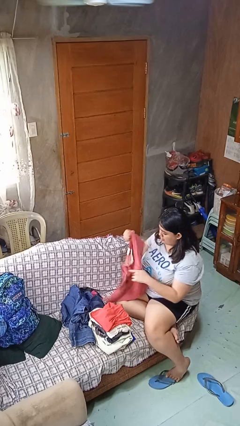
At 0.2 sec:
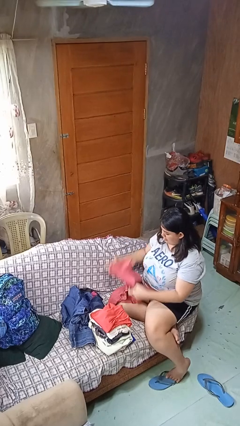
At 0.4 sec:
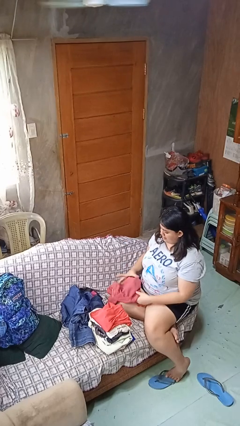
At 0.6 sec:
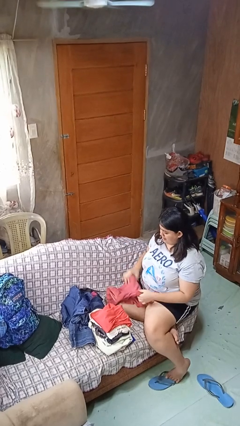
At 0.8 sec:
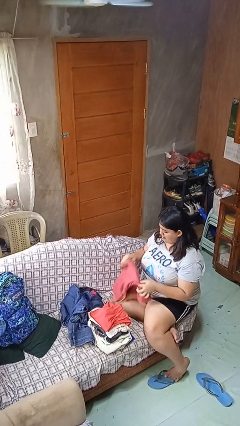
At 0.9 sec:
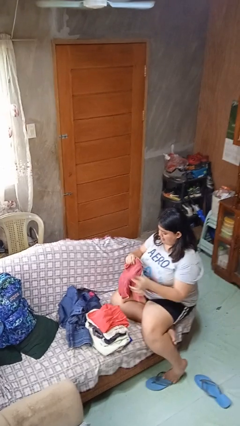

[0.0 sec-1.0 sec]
person folds shirt

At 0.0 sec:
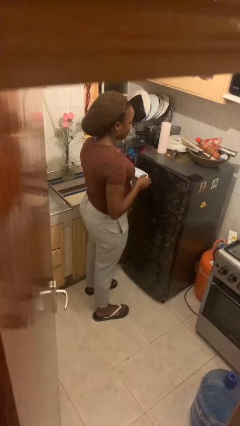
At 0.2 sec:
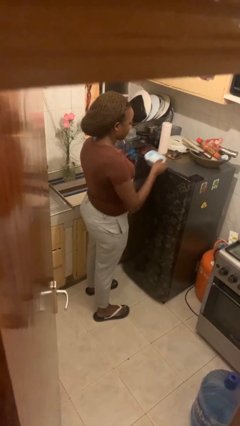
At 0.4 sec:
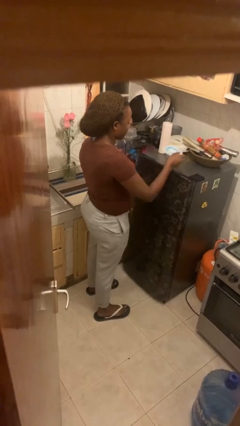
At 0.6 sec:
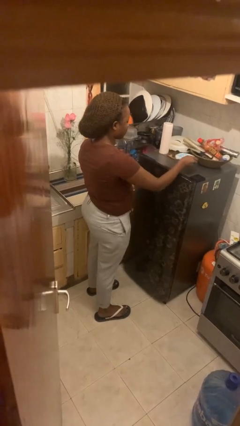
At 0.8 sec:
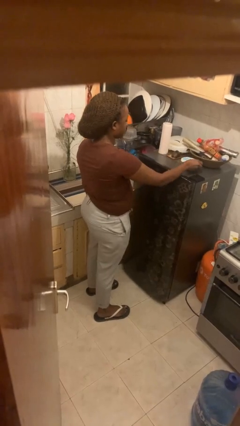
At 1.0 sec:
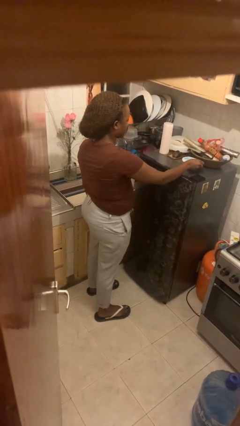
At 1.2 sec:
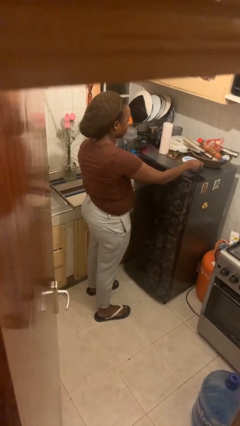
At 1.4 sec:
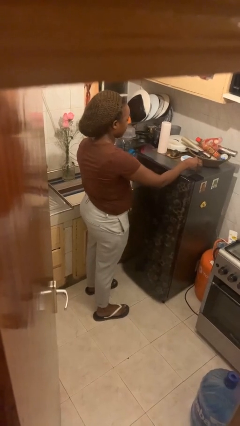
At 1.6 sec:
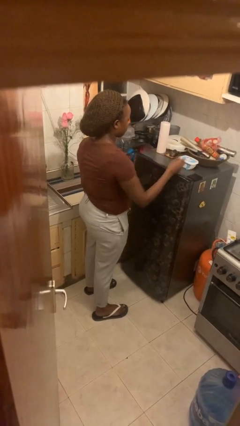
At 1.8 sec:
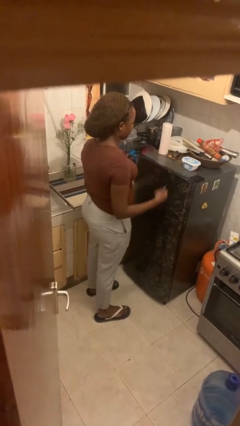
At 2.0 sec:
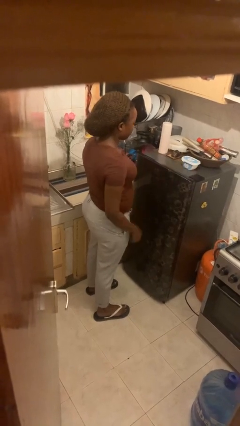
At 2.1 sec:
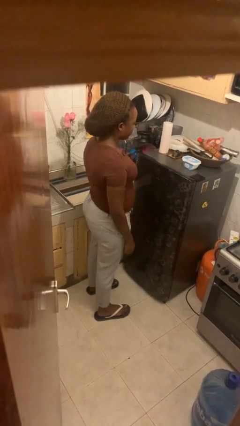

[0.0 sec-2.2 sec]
person puts down object on countertop

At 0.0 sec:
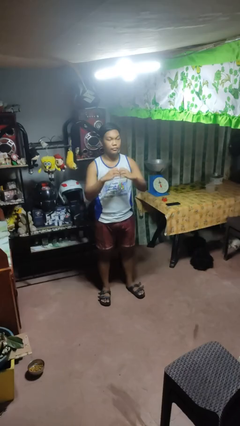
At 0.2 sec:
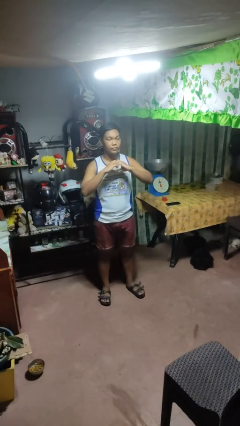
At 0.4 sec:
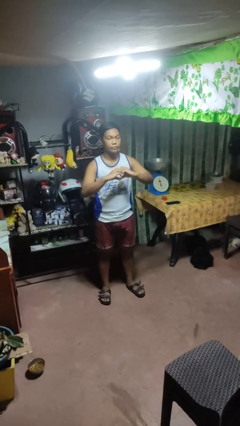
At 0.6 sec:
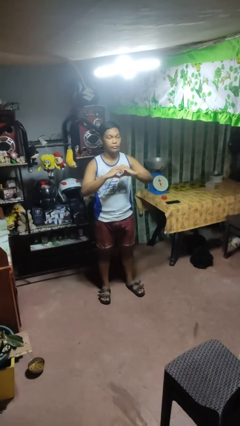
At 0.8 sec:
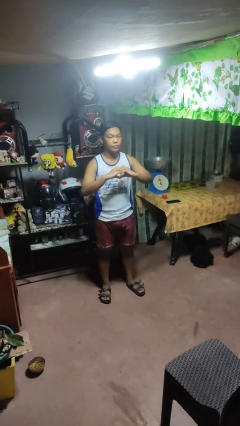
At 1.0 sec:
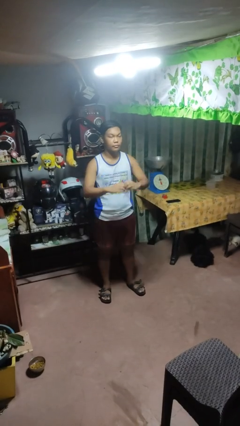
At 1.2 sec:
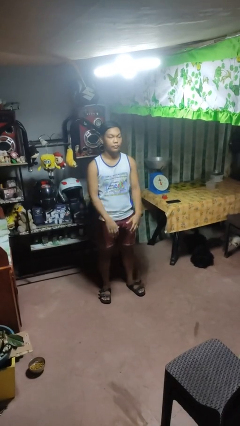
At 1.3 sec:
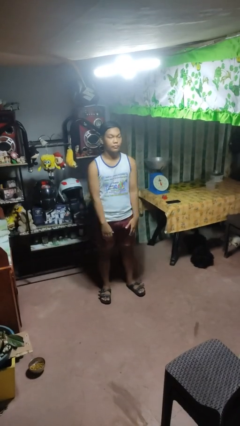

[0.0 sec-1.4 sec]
person gestures heart

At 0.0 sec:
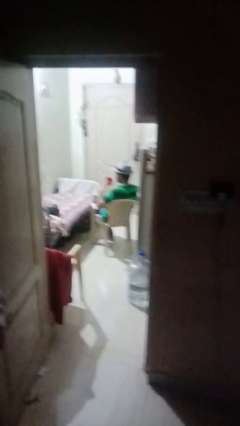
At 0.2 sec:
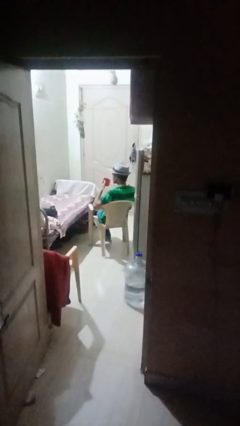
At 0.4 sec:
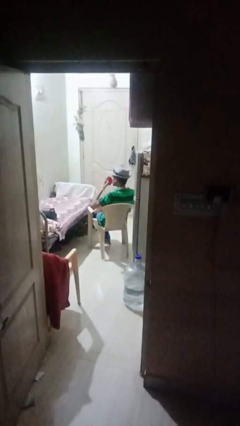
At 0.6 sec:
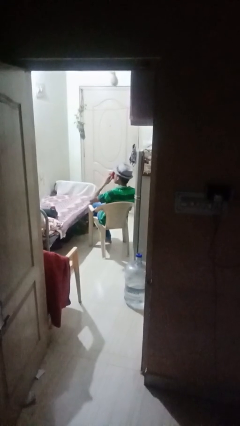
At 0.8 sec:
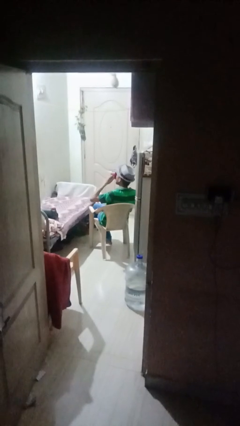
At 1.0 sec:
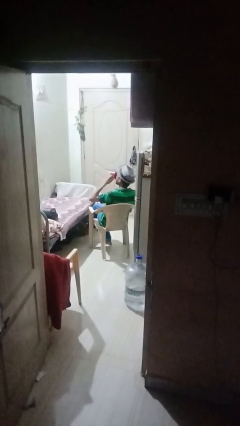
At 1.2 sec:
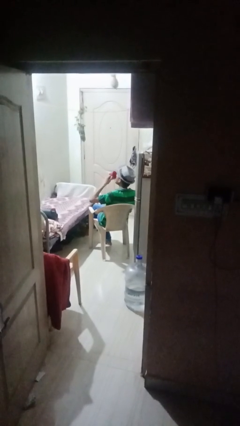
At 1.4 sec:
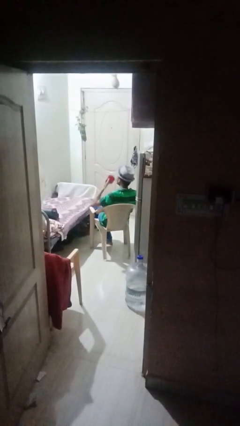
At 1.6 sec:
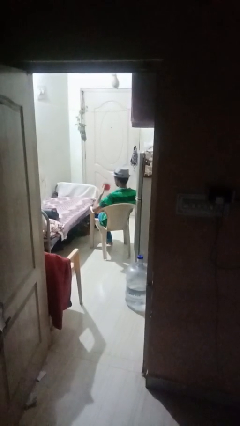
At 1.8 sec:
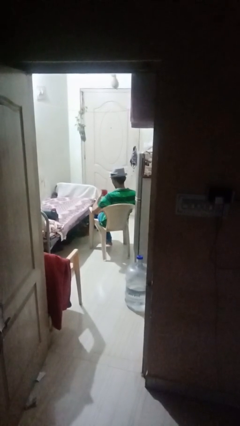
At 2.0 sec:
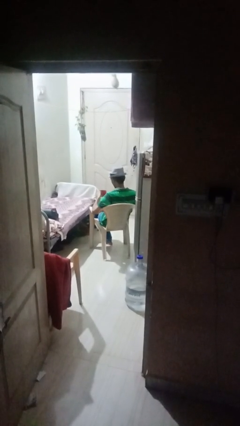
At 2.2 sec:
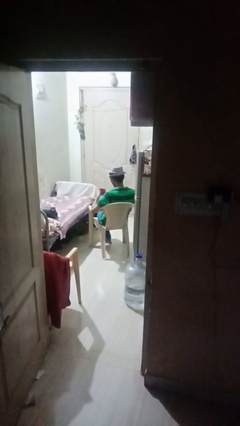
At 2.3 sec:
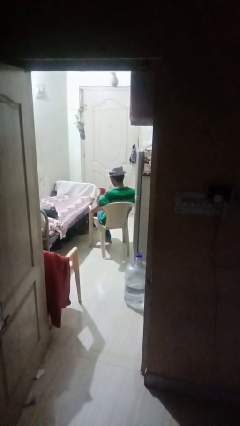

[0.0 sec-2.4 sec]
person drinks from mug

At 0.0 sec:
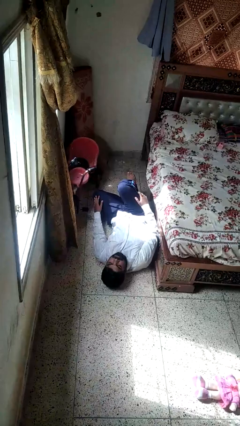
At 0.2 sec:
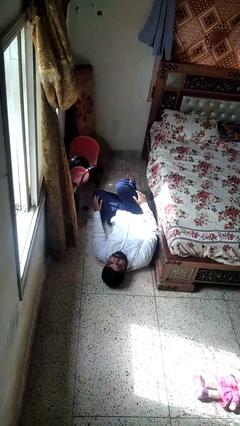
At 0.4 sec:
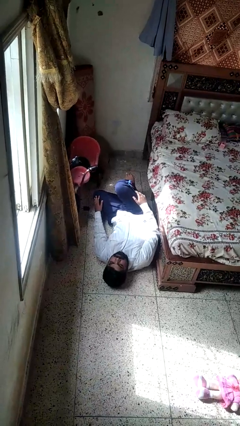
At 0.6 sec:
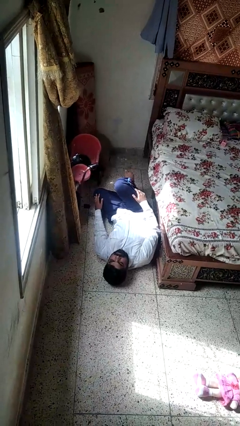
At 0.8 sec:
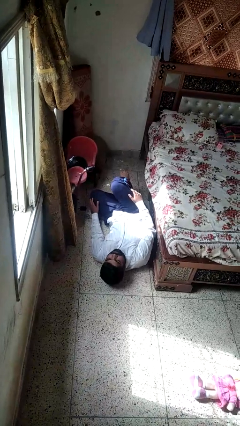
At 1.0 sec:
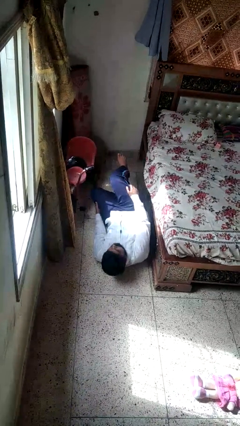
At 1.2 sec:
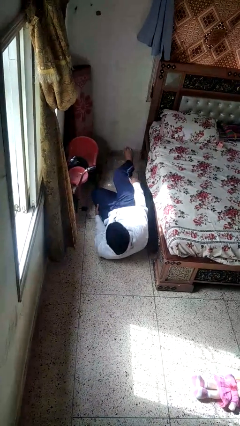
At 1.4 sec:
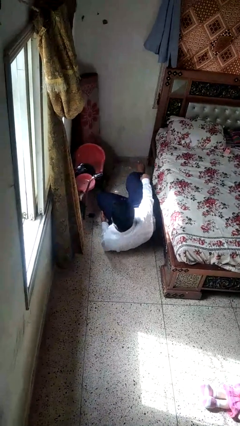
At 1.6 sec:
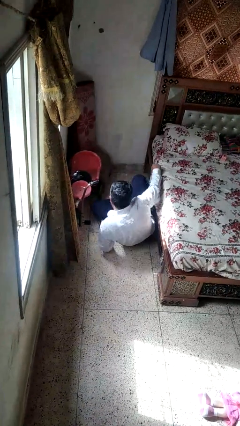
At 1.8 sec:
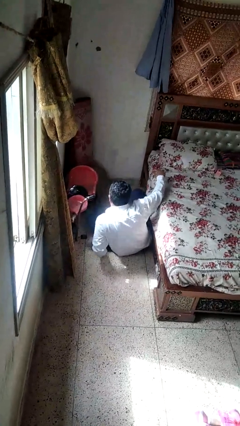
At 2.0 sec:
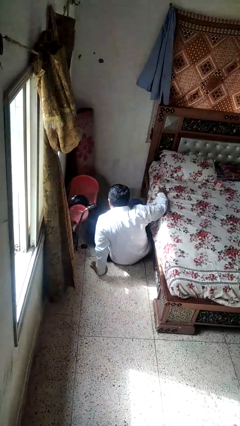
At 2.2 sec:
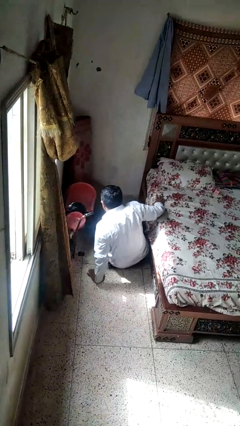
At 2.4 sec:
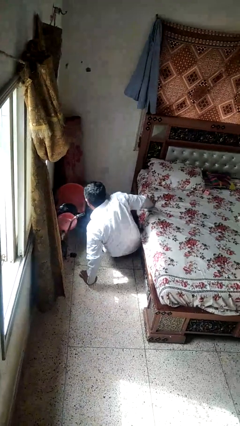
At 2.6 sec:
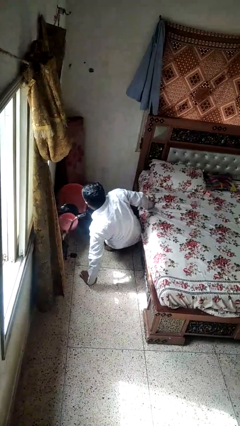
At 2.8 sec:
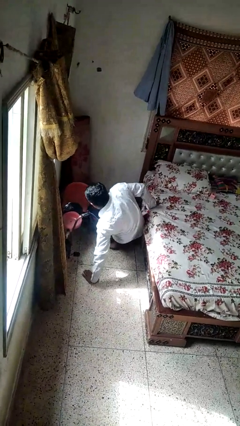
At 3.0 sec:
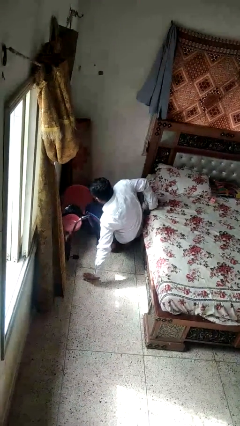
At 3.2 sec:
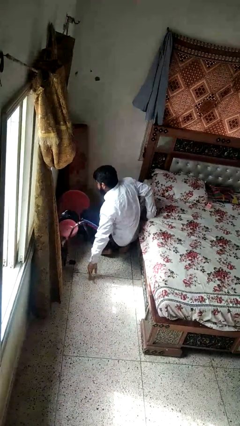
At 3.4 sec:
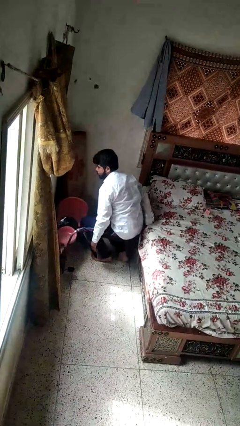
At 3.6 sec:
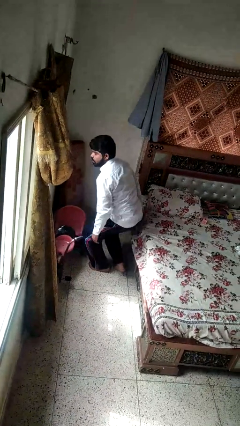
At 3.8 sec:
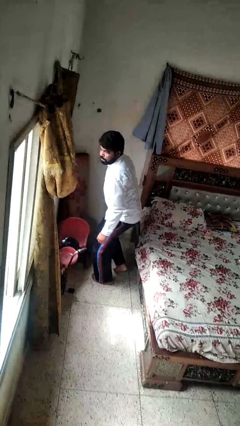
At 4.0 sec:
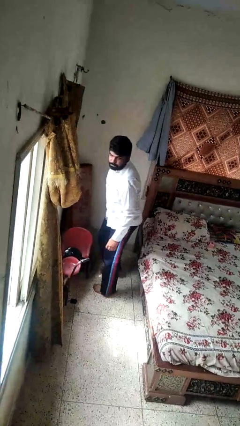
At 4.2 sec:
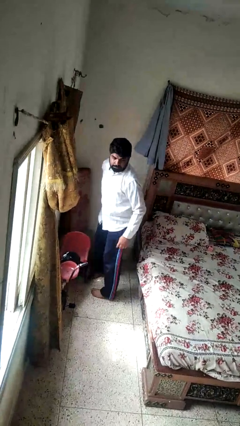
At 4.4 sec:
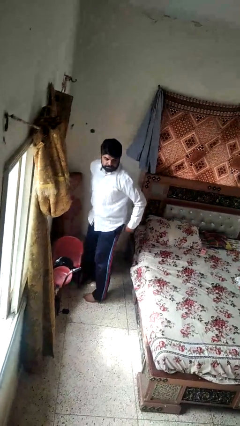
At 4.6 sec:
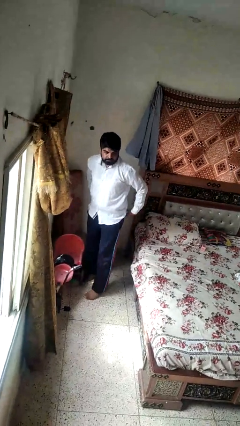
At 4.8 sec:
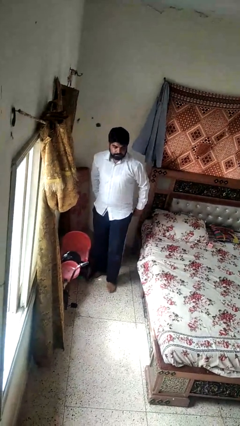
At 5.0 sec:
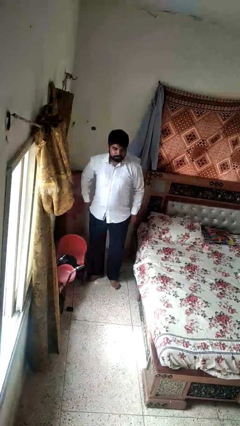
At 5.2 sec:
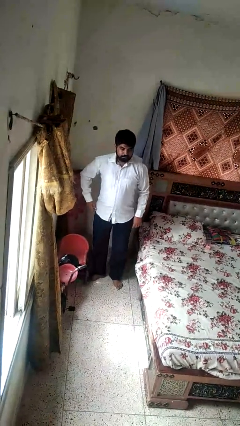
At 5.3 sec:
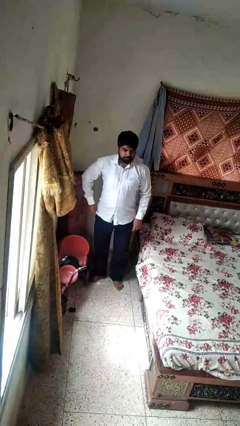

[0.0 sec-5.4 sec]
person stands up from floor

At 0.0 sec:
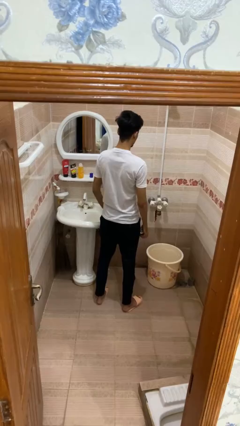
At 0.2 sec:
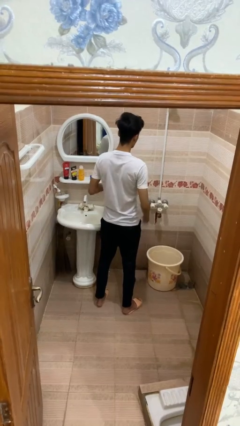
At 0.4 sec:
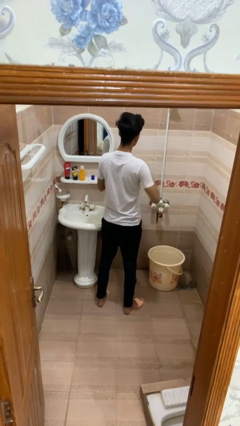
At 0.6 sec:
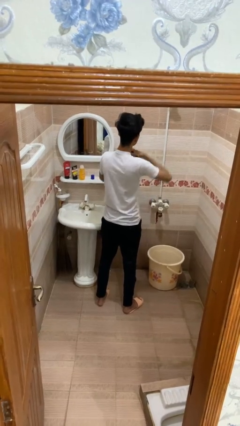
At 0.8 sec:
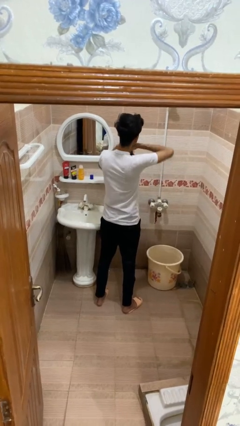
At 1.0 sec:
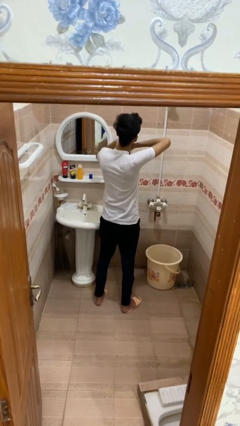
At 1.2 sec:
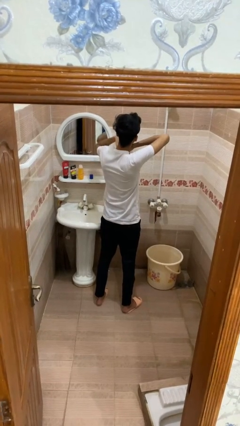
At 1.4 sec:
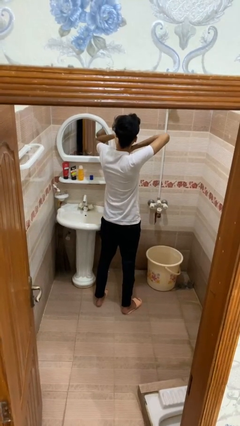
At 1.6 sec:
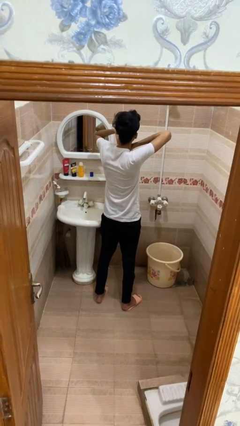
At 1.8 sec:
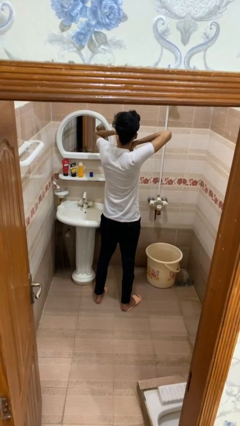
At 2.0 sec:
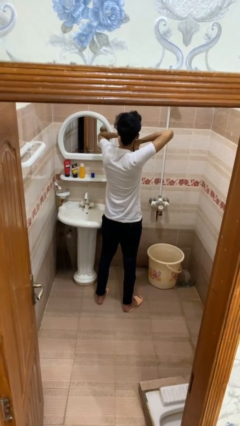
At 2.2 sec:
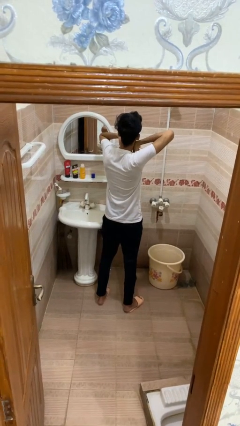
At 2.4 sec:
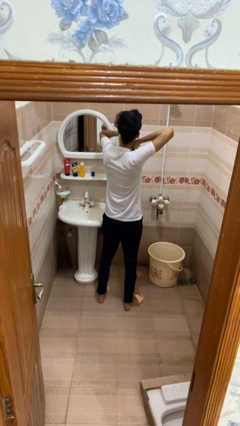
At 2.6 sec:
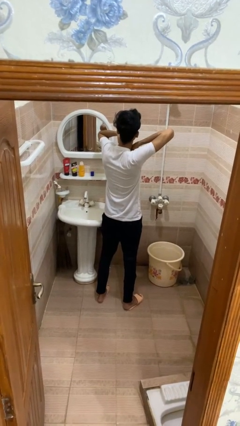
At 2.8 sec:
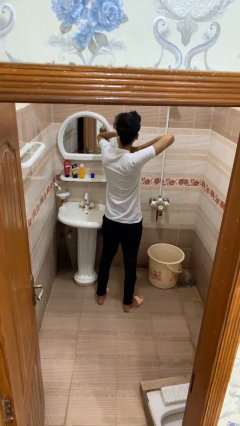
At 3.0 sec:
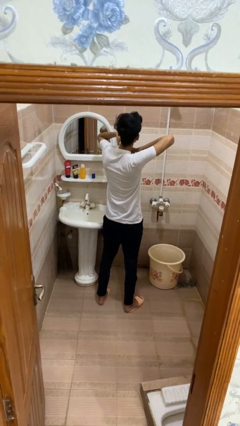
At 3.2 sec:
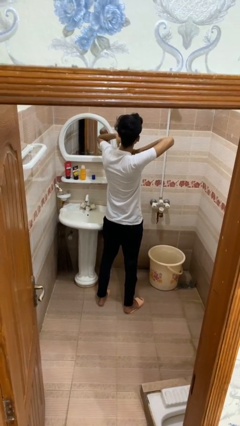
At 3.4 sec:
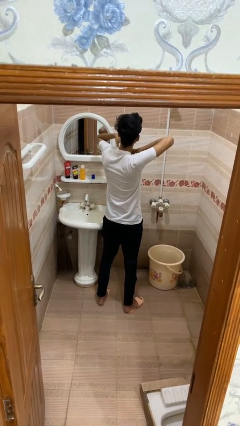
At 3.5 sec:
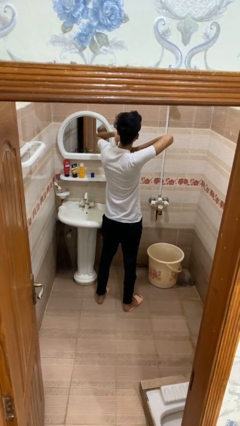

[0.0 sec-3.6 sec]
person applies deodorant

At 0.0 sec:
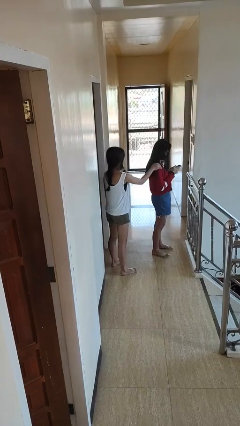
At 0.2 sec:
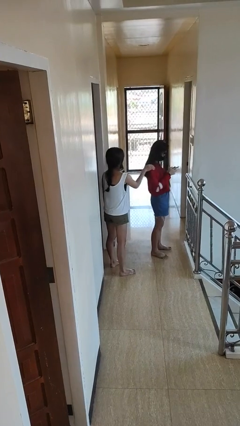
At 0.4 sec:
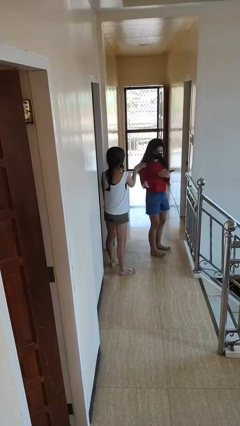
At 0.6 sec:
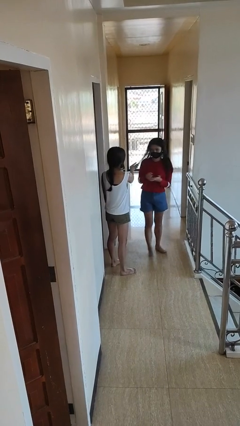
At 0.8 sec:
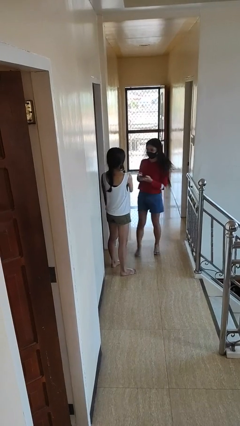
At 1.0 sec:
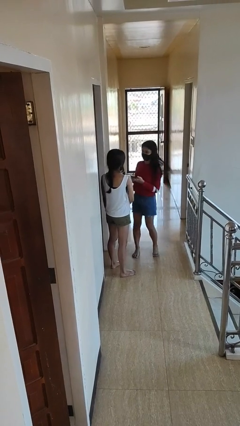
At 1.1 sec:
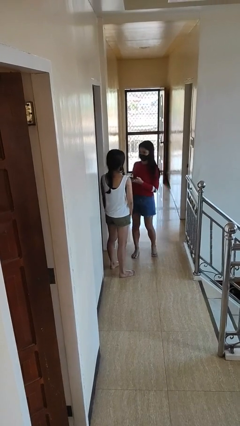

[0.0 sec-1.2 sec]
person grabs person by shoulder
